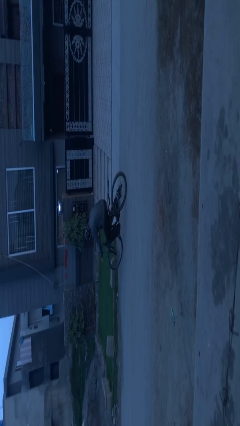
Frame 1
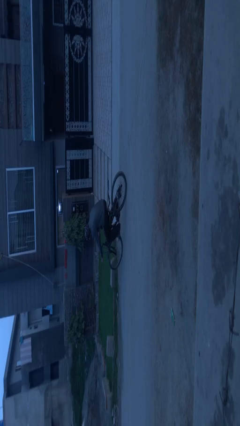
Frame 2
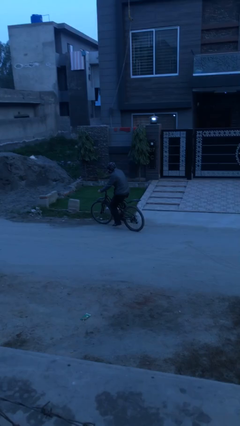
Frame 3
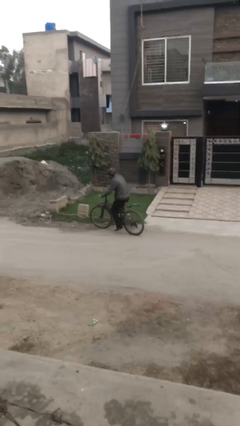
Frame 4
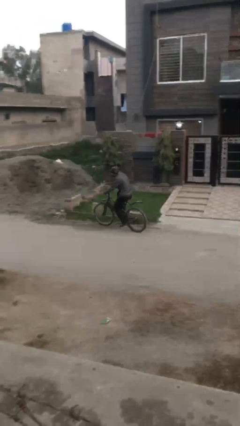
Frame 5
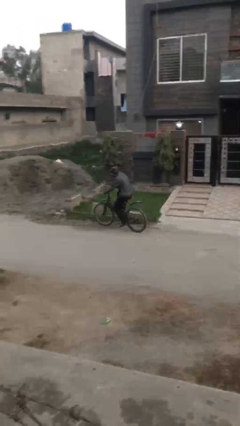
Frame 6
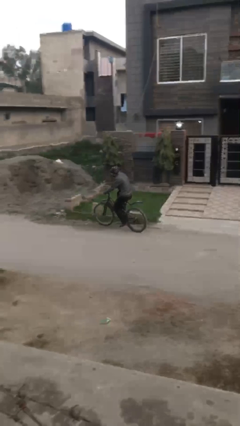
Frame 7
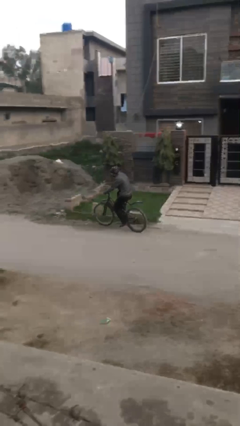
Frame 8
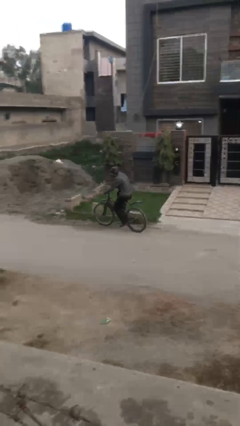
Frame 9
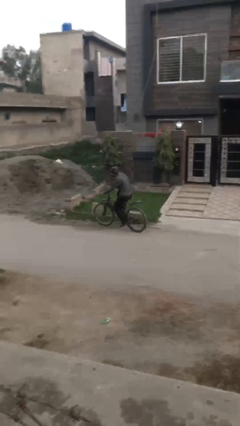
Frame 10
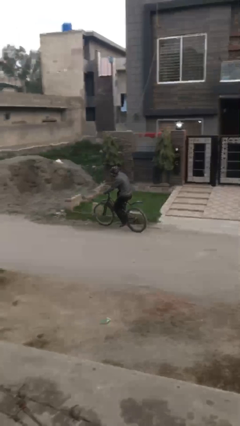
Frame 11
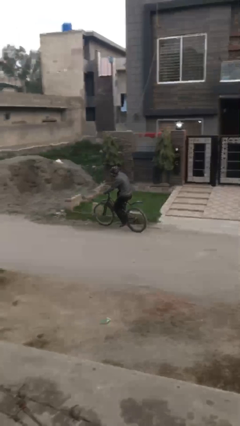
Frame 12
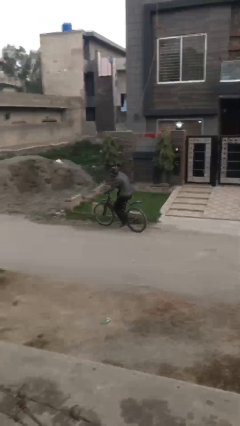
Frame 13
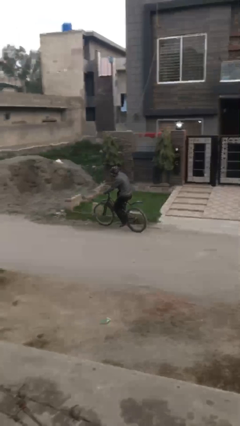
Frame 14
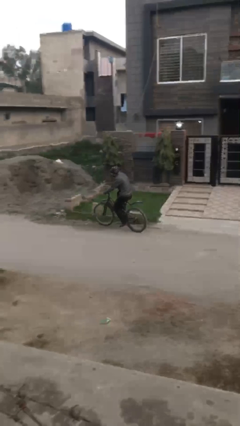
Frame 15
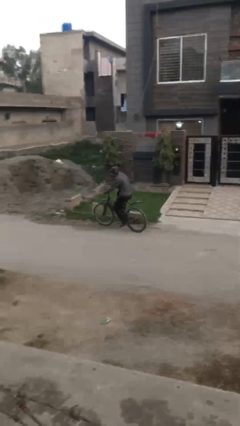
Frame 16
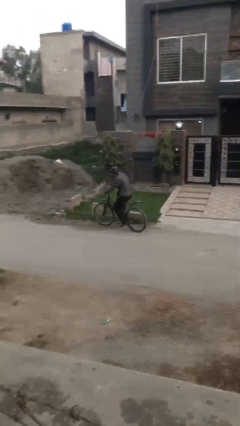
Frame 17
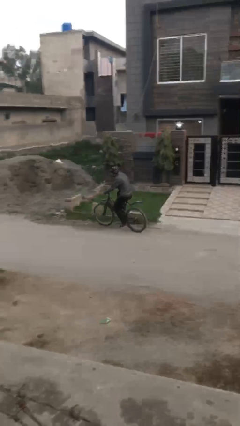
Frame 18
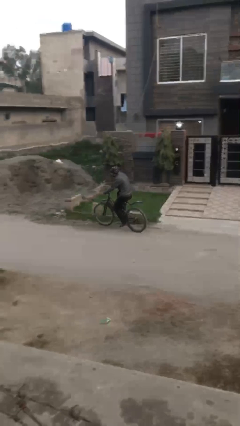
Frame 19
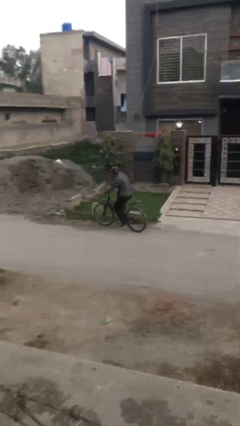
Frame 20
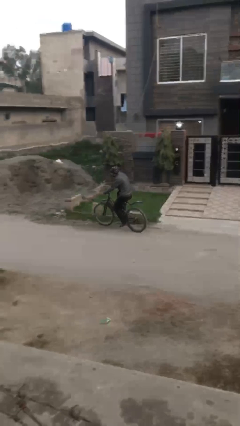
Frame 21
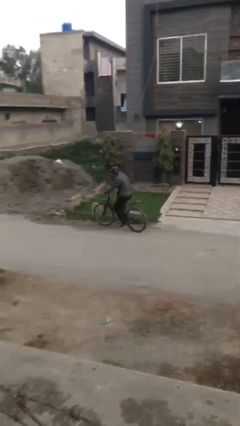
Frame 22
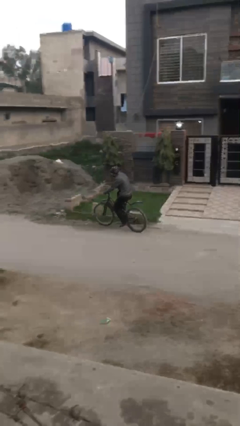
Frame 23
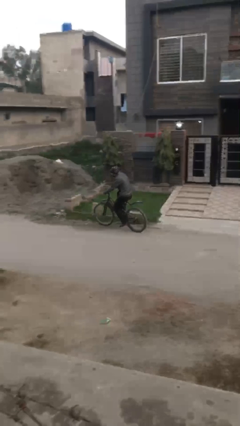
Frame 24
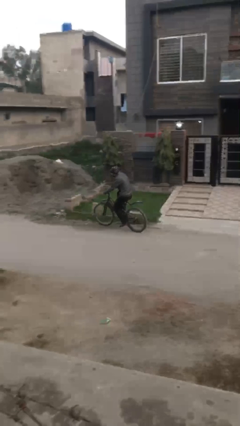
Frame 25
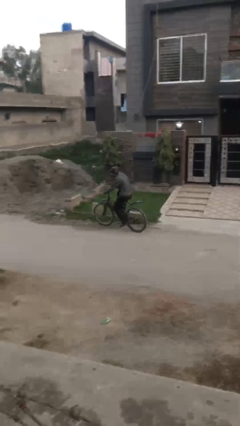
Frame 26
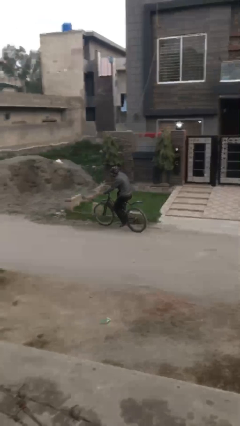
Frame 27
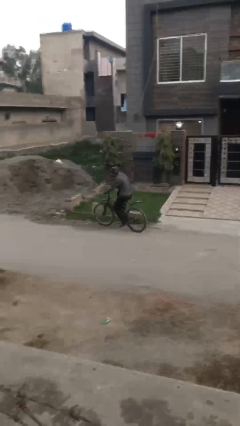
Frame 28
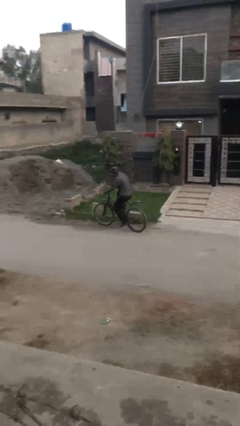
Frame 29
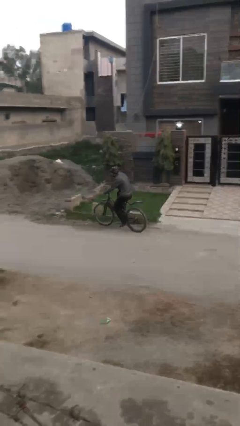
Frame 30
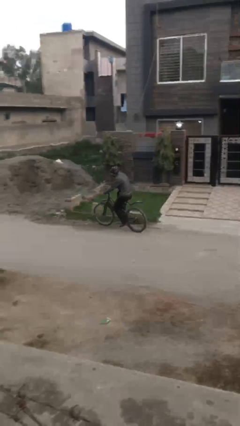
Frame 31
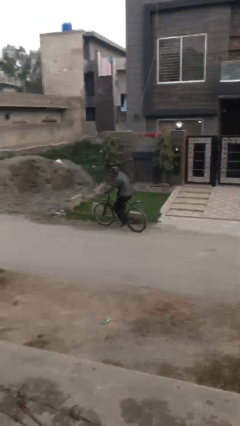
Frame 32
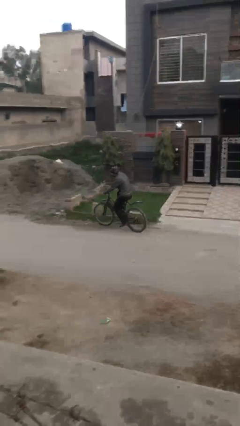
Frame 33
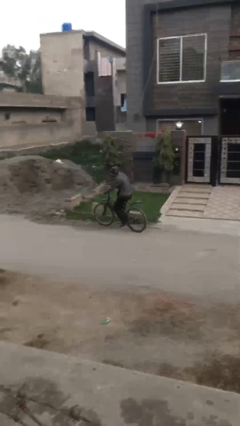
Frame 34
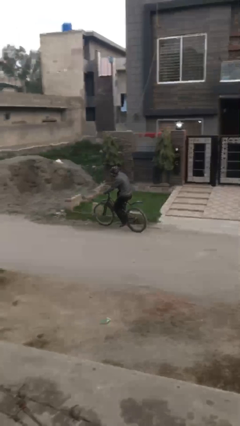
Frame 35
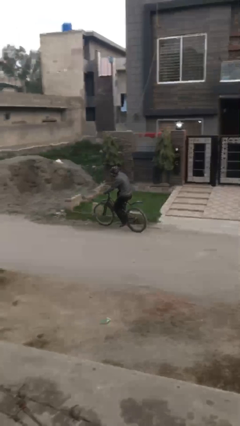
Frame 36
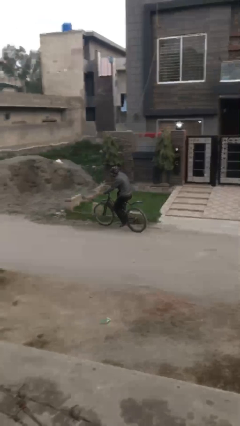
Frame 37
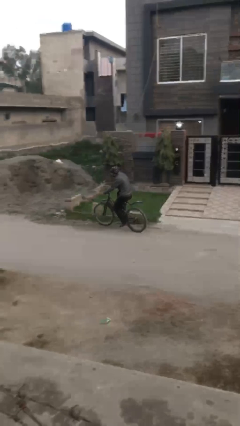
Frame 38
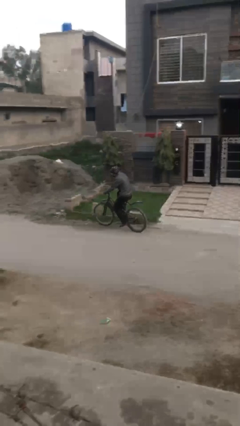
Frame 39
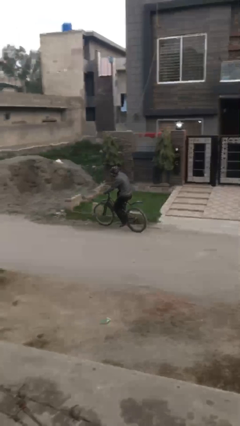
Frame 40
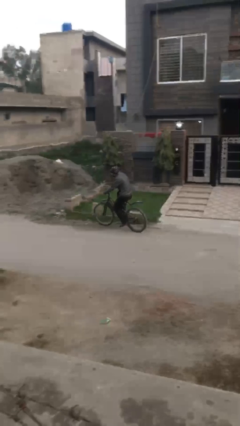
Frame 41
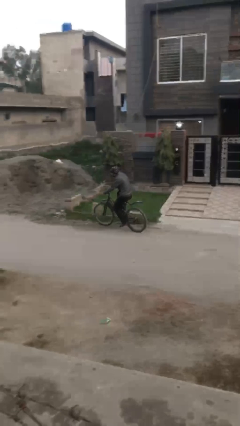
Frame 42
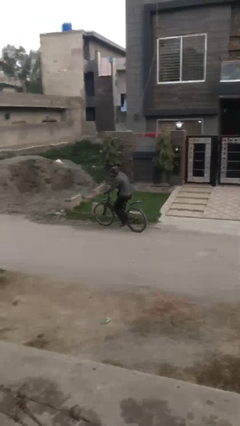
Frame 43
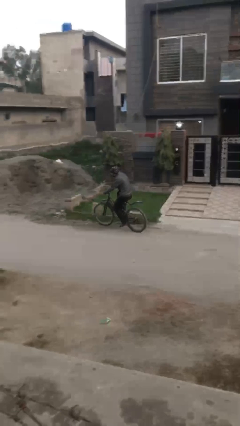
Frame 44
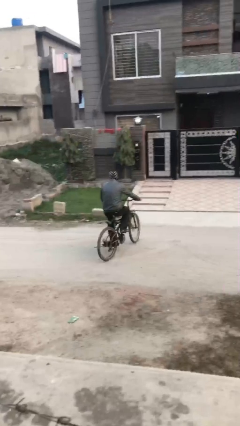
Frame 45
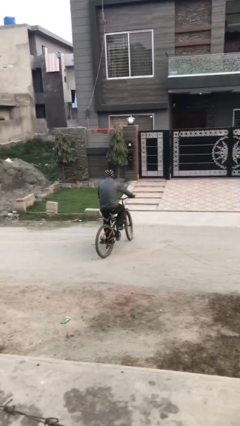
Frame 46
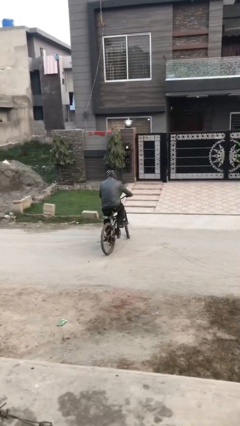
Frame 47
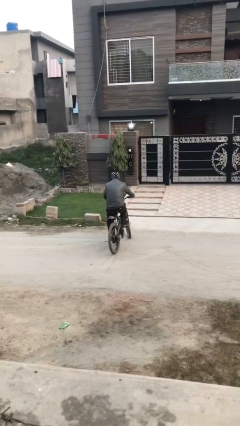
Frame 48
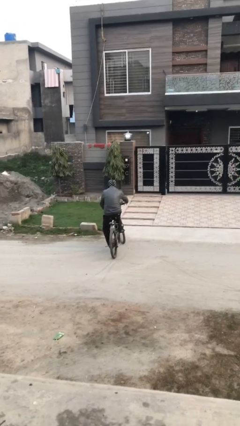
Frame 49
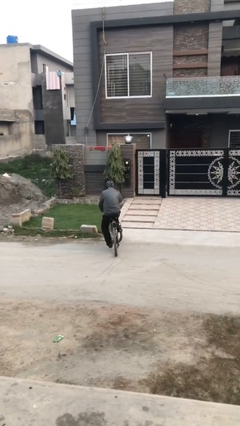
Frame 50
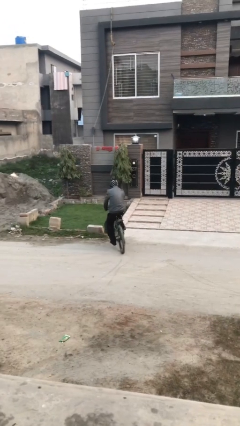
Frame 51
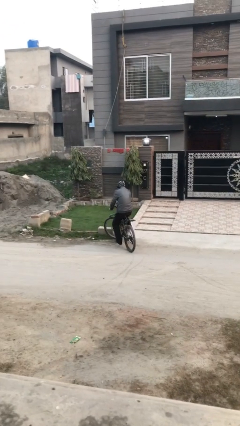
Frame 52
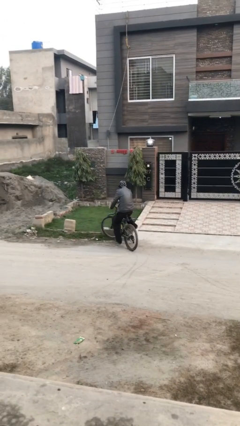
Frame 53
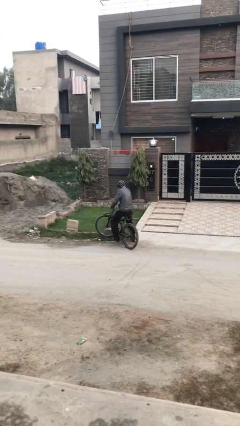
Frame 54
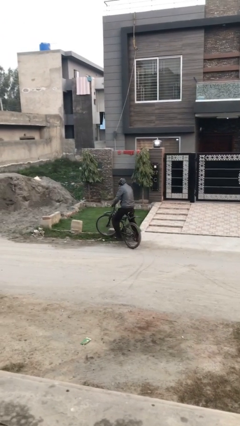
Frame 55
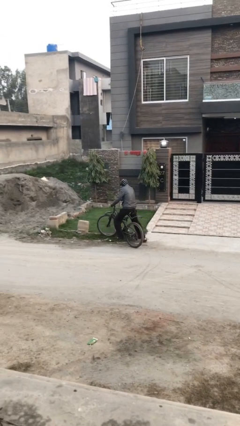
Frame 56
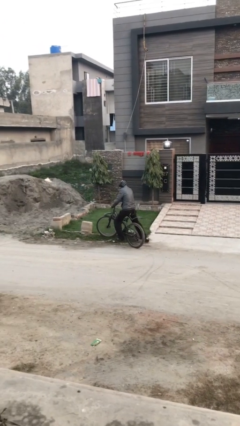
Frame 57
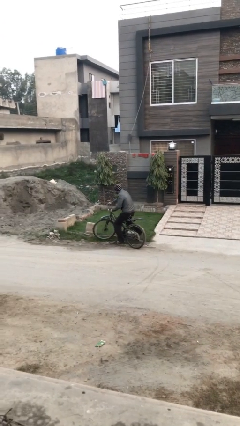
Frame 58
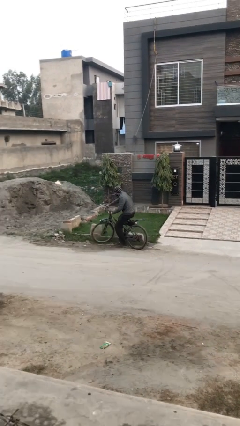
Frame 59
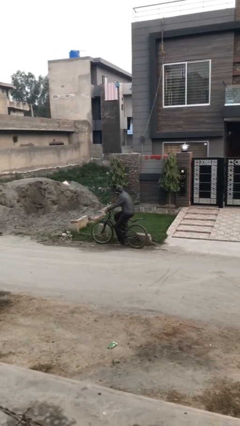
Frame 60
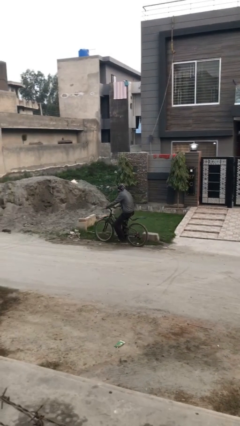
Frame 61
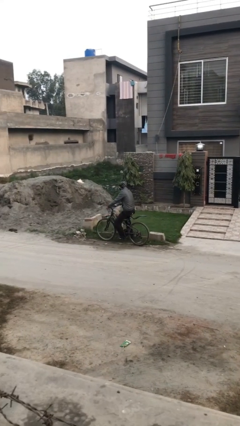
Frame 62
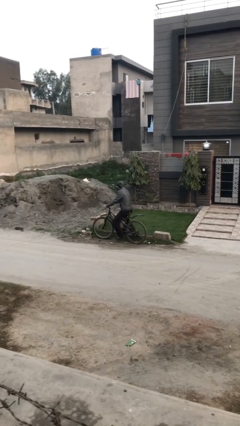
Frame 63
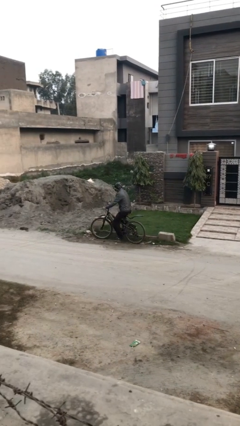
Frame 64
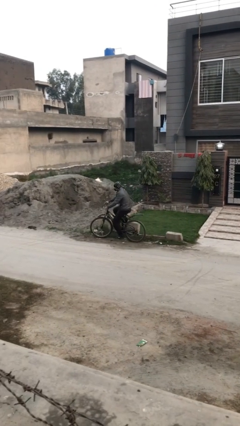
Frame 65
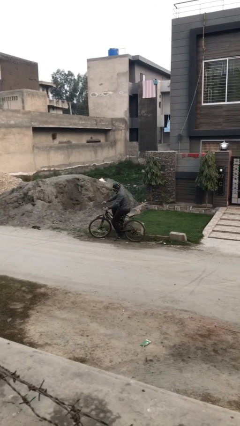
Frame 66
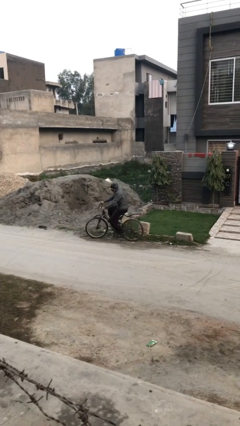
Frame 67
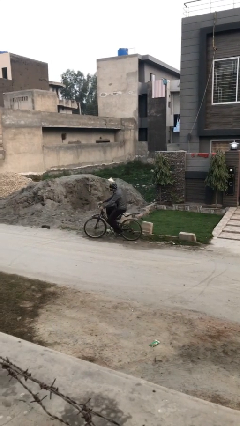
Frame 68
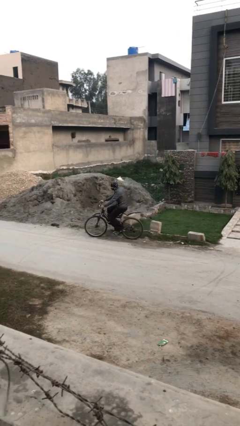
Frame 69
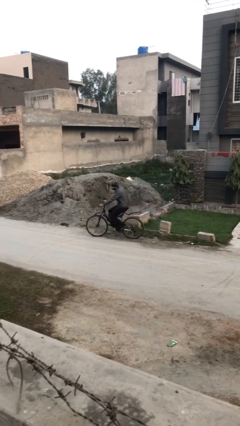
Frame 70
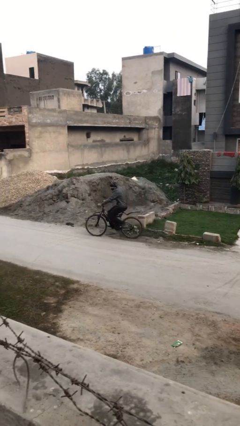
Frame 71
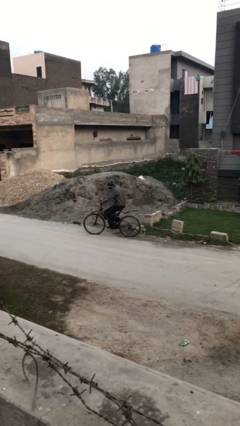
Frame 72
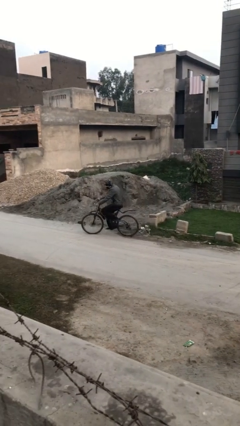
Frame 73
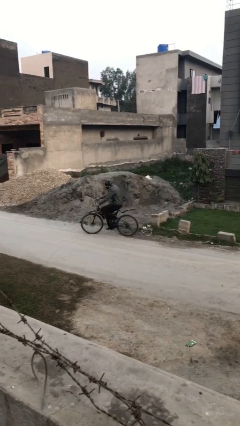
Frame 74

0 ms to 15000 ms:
person rides bicycle

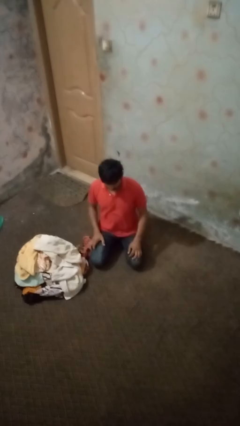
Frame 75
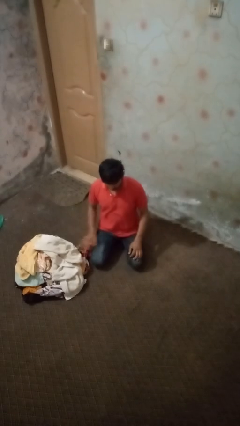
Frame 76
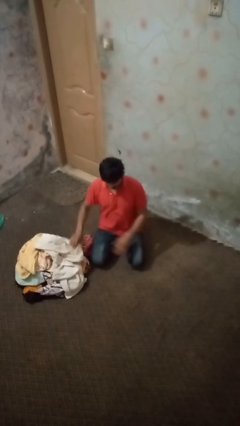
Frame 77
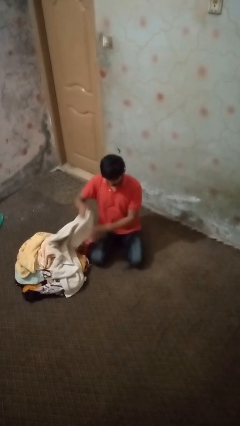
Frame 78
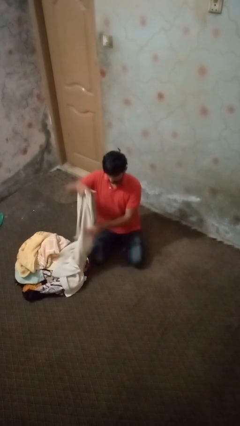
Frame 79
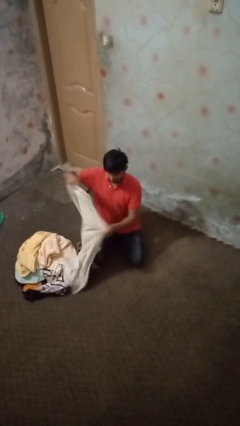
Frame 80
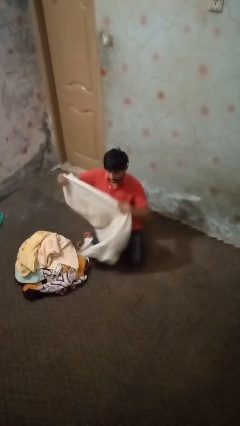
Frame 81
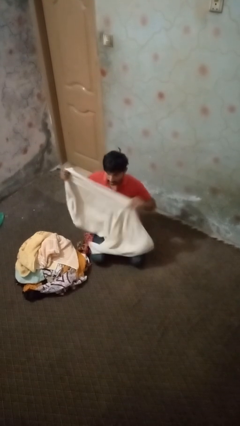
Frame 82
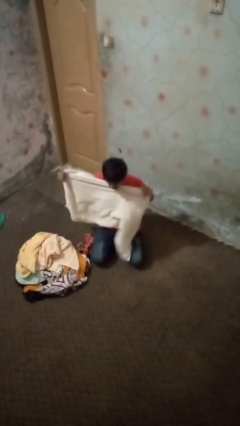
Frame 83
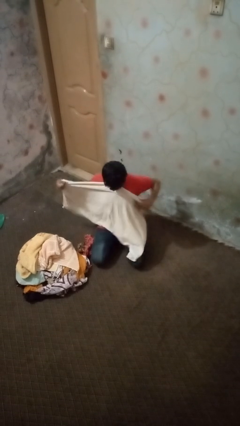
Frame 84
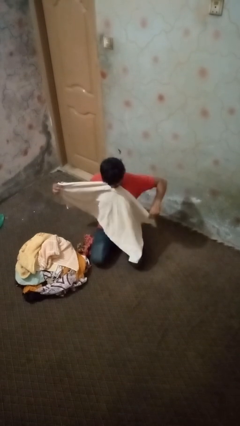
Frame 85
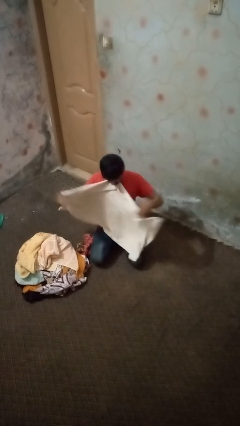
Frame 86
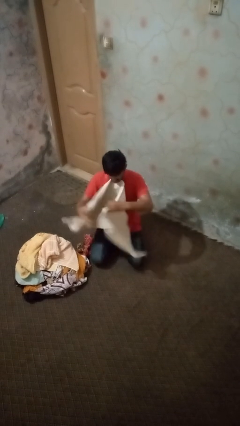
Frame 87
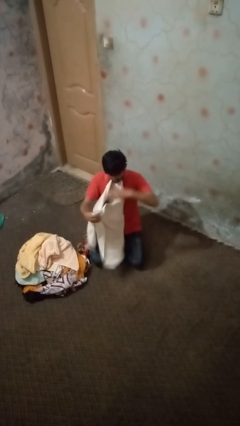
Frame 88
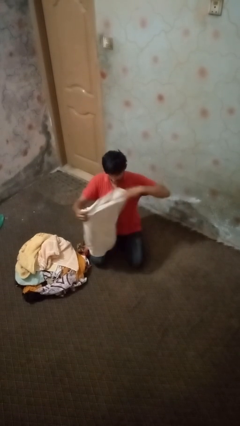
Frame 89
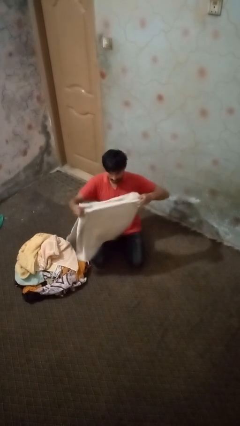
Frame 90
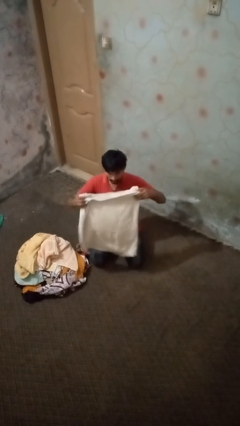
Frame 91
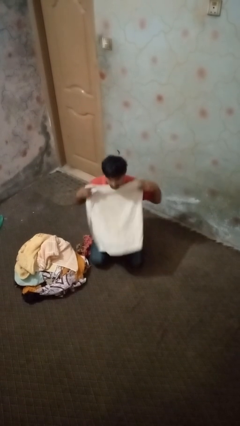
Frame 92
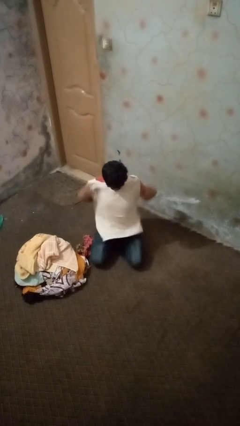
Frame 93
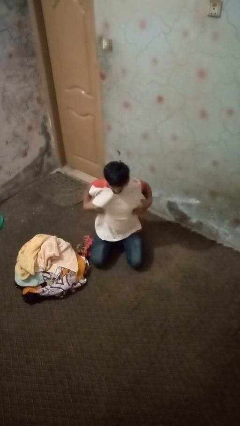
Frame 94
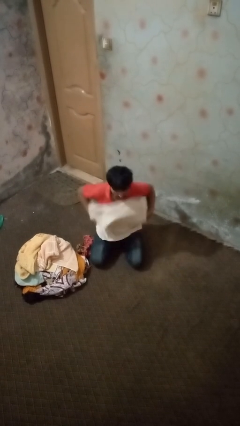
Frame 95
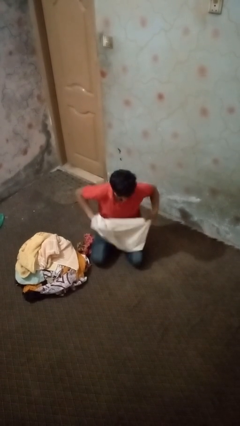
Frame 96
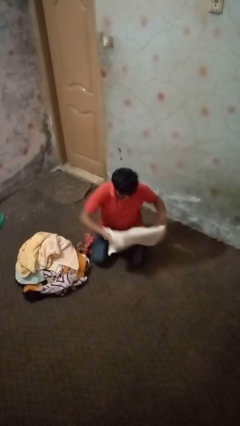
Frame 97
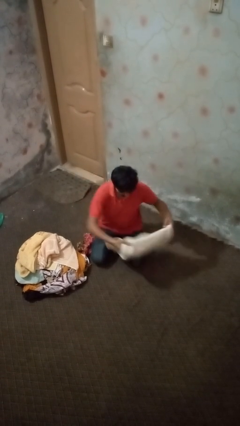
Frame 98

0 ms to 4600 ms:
person folds towel
